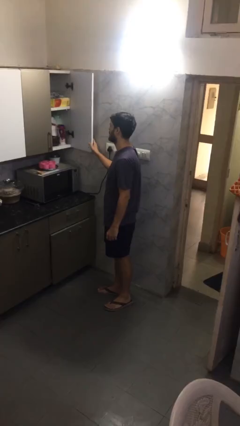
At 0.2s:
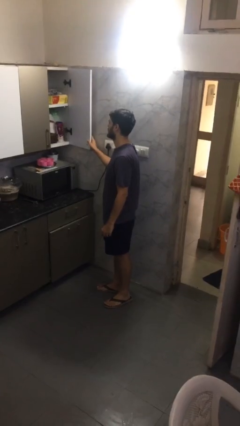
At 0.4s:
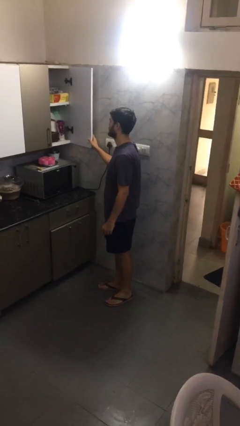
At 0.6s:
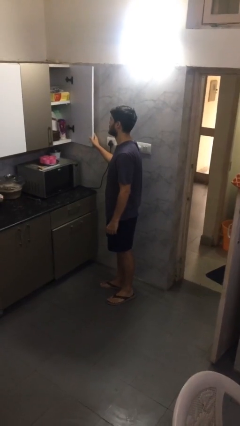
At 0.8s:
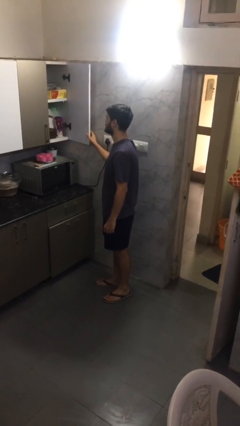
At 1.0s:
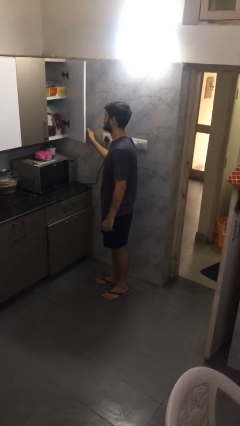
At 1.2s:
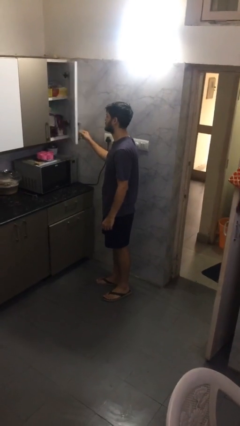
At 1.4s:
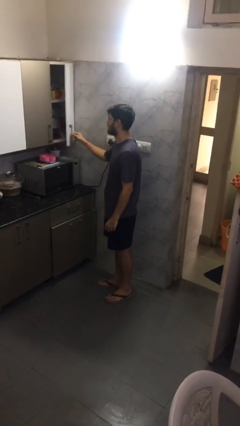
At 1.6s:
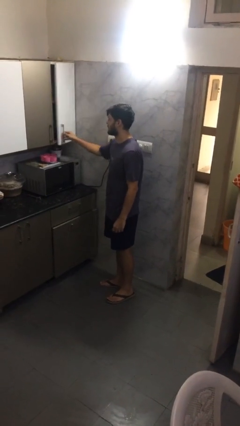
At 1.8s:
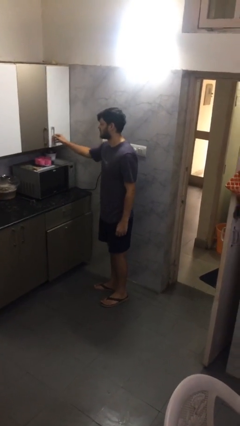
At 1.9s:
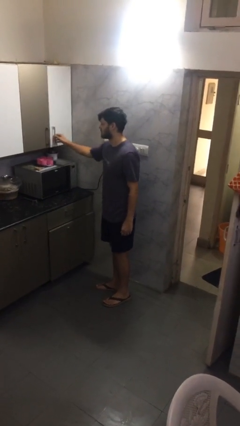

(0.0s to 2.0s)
person closes cabinet

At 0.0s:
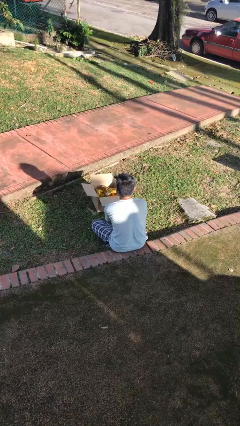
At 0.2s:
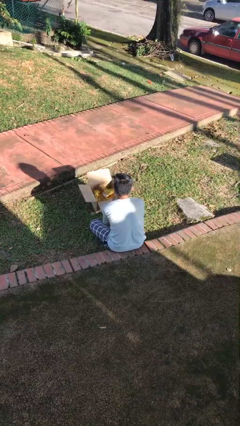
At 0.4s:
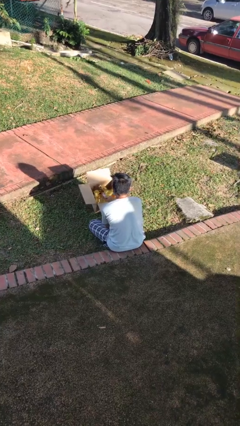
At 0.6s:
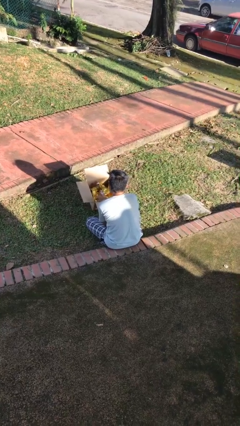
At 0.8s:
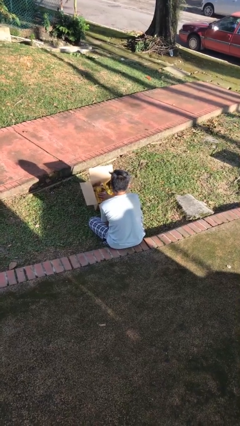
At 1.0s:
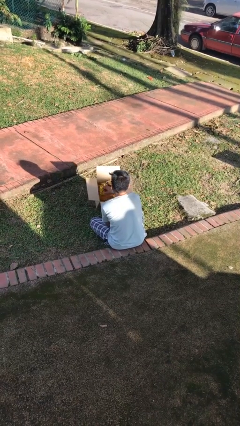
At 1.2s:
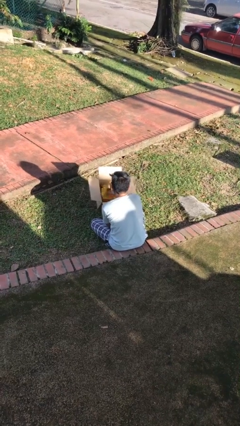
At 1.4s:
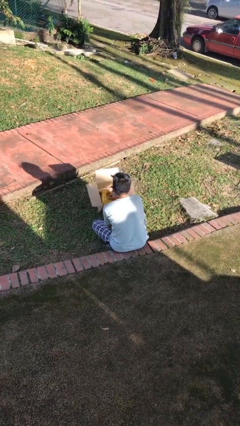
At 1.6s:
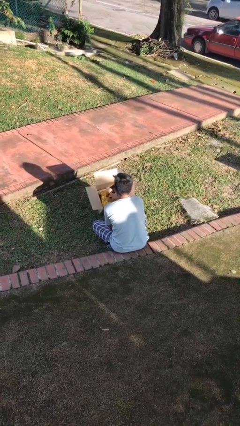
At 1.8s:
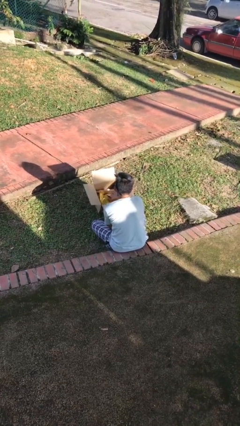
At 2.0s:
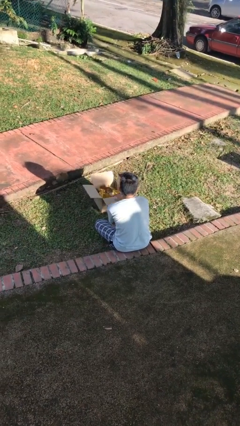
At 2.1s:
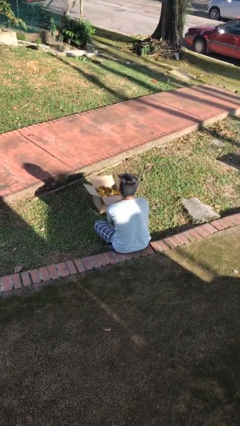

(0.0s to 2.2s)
person searches in box

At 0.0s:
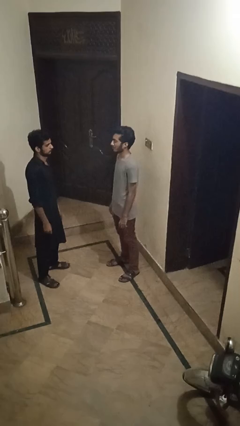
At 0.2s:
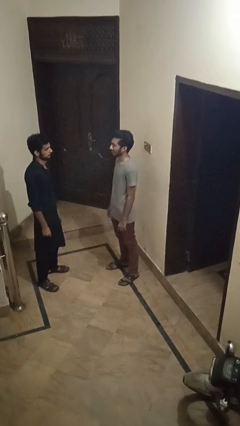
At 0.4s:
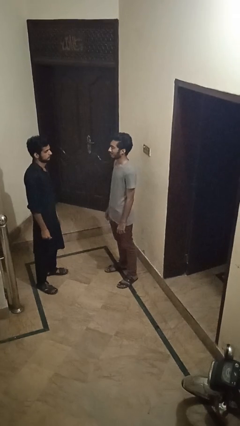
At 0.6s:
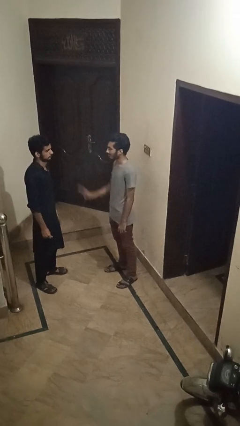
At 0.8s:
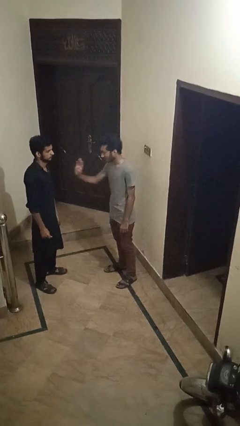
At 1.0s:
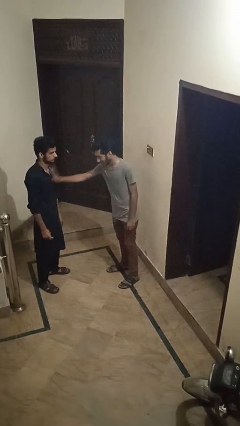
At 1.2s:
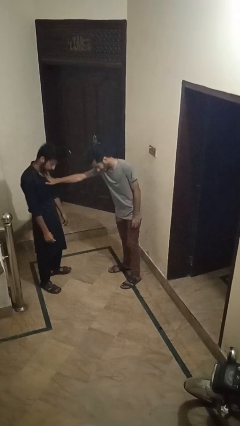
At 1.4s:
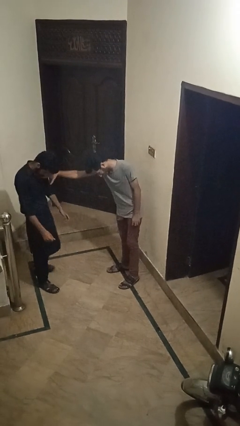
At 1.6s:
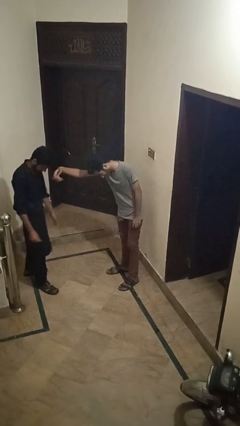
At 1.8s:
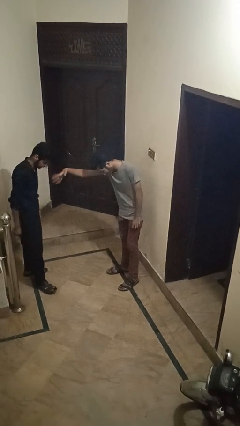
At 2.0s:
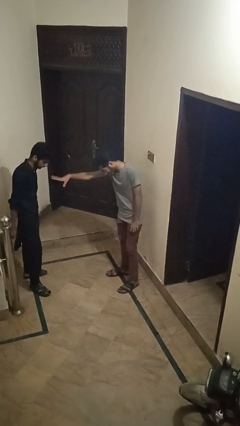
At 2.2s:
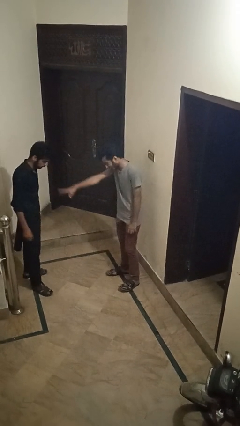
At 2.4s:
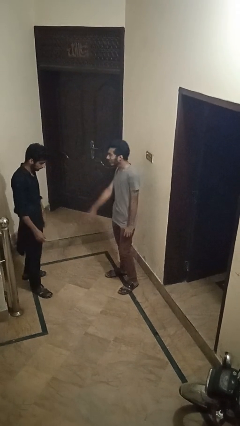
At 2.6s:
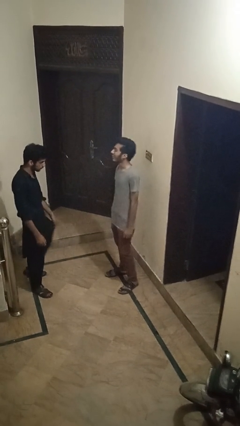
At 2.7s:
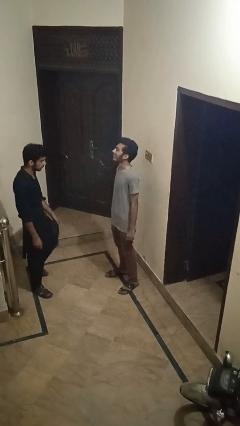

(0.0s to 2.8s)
person shoves person

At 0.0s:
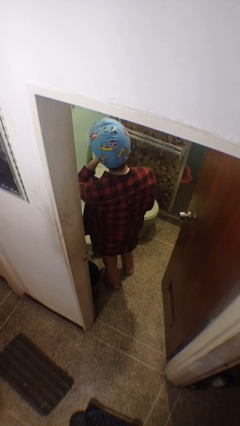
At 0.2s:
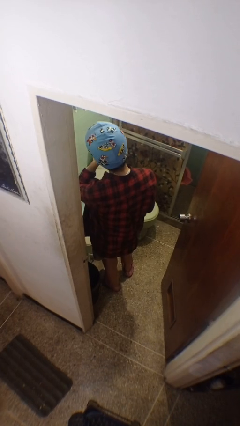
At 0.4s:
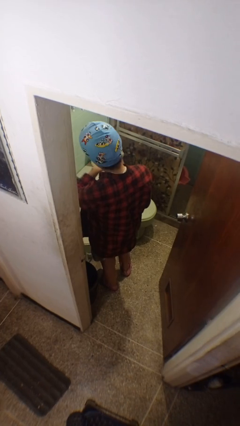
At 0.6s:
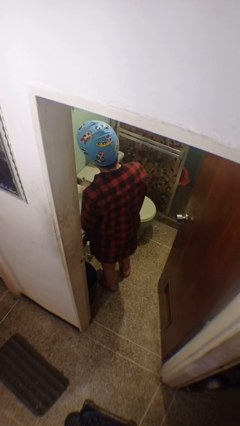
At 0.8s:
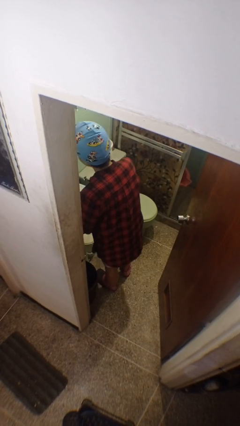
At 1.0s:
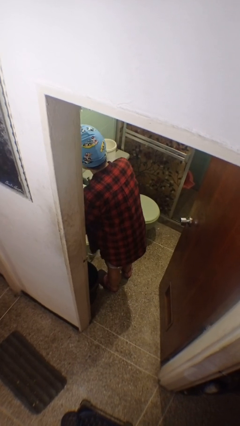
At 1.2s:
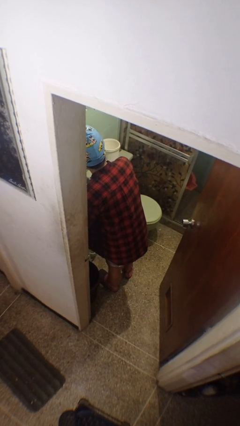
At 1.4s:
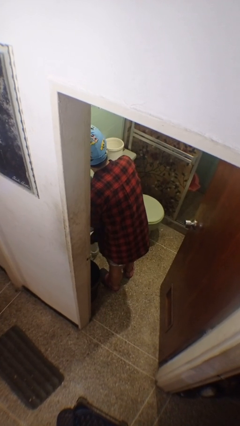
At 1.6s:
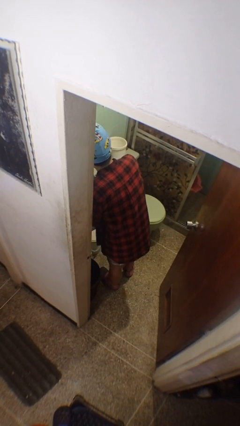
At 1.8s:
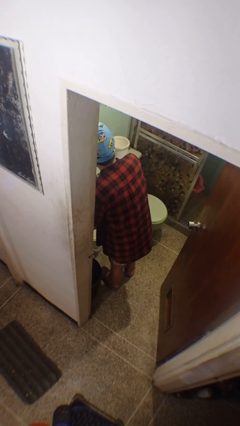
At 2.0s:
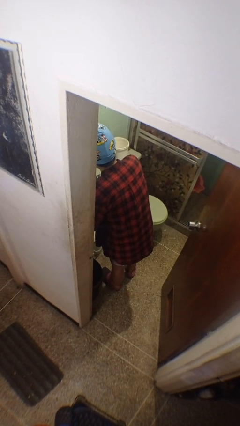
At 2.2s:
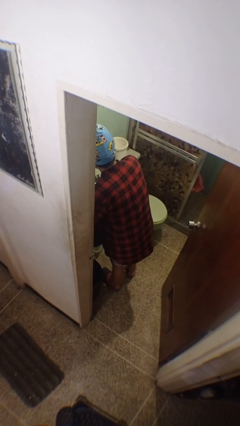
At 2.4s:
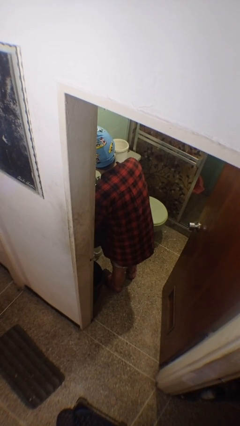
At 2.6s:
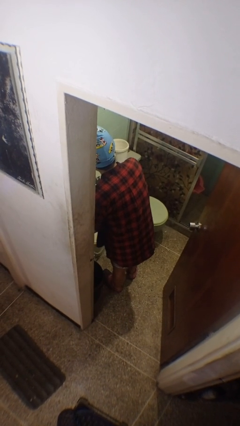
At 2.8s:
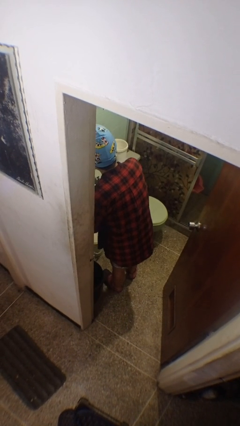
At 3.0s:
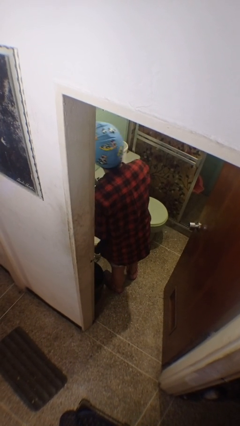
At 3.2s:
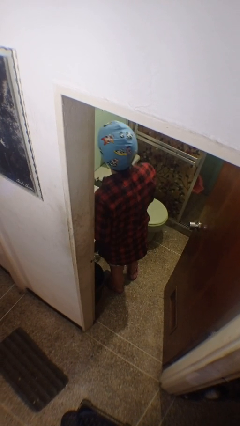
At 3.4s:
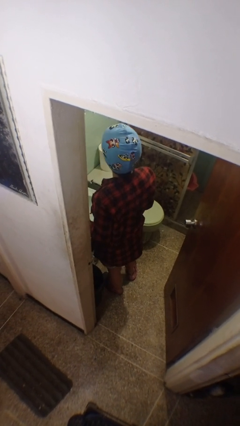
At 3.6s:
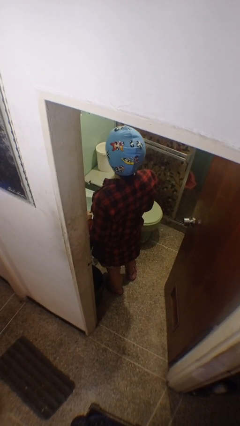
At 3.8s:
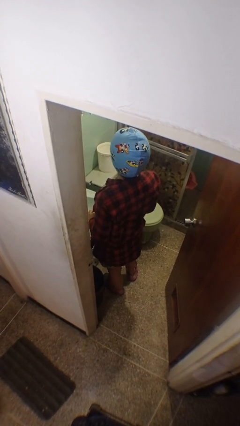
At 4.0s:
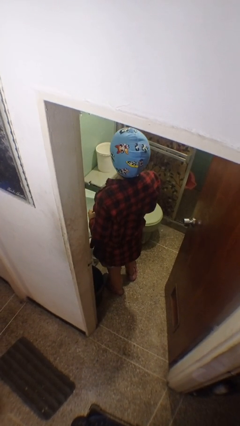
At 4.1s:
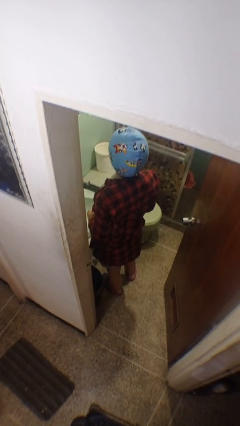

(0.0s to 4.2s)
person washes hands

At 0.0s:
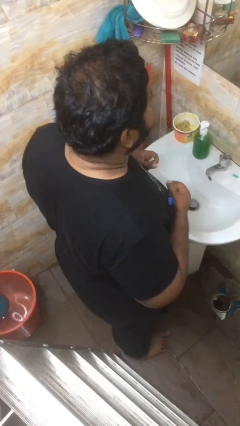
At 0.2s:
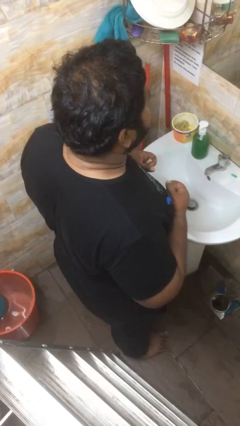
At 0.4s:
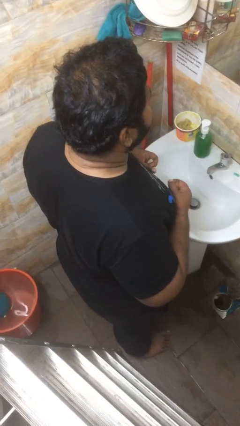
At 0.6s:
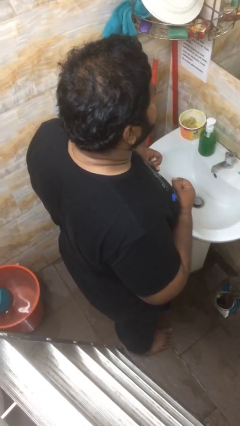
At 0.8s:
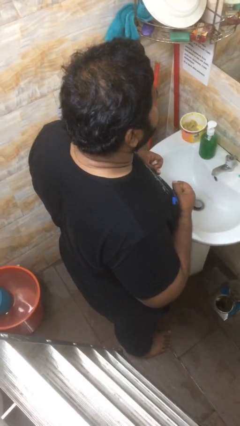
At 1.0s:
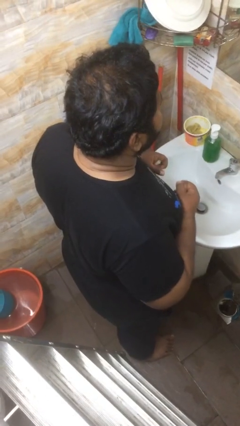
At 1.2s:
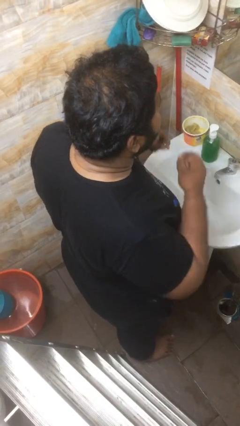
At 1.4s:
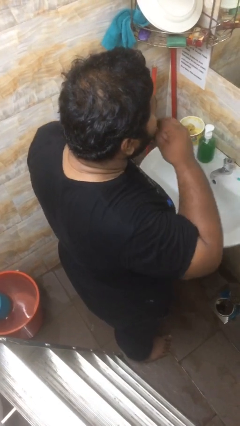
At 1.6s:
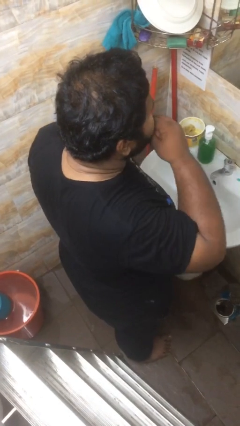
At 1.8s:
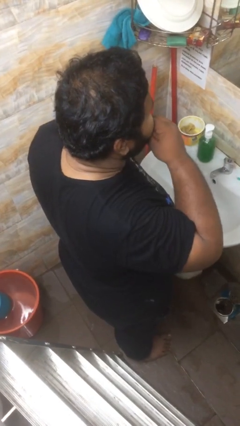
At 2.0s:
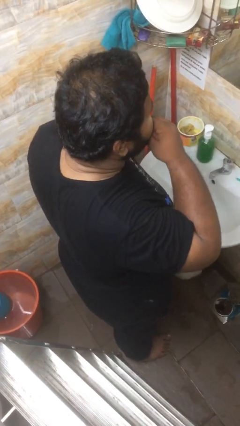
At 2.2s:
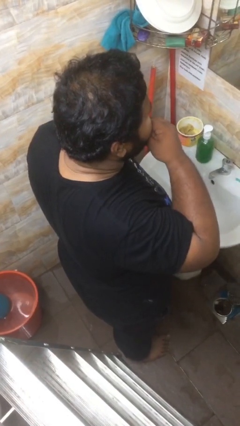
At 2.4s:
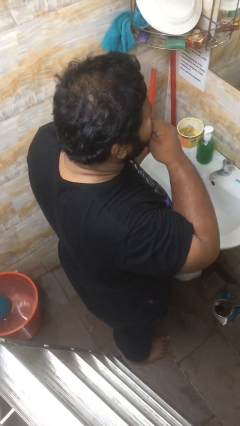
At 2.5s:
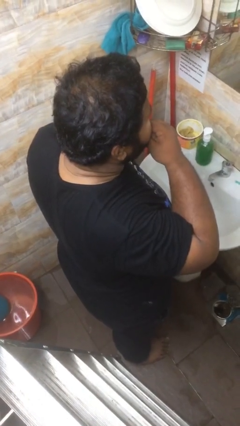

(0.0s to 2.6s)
person flosses

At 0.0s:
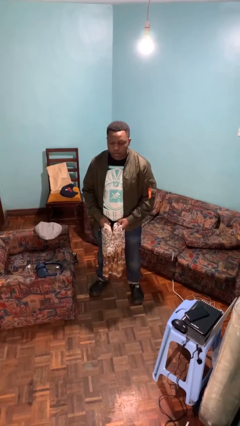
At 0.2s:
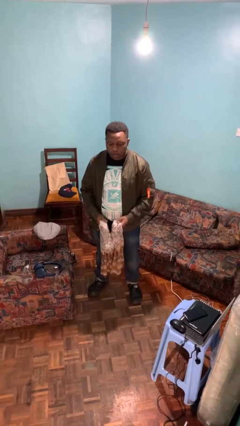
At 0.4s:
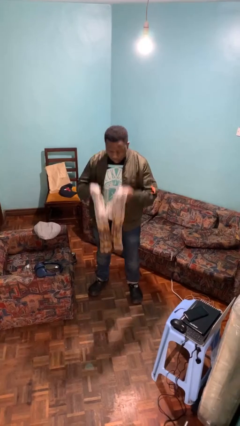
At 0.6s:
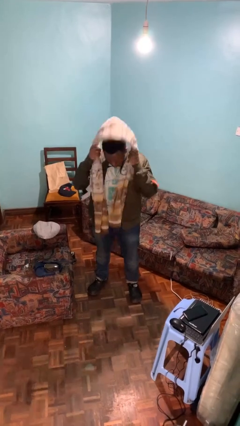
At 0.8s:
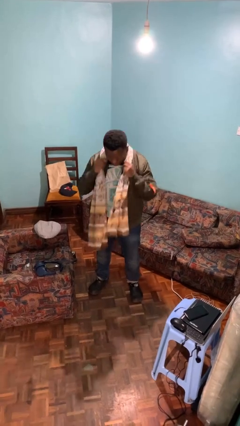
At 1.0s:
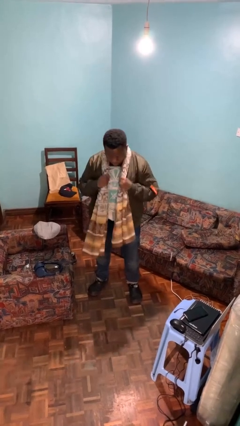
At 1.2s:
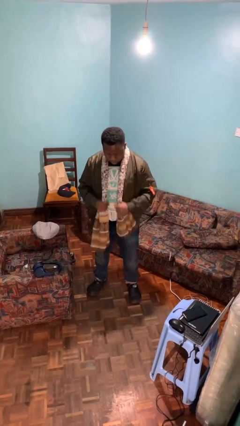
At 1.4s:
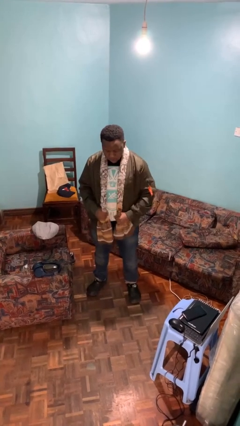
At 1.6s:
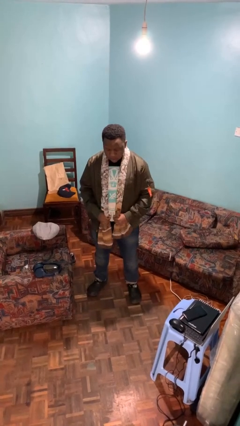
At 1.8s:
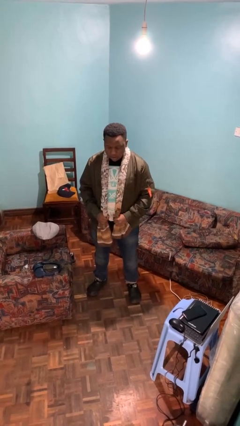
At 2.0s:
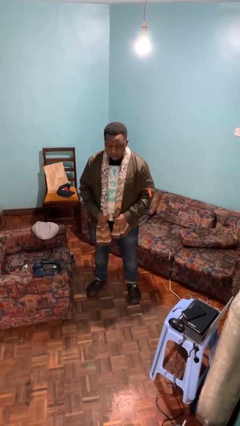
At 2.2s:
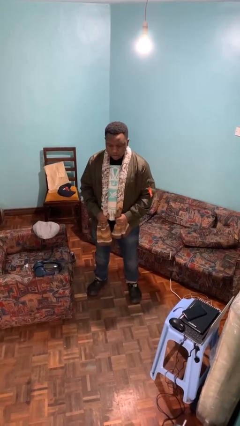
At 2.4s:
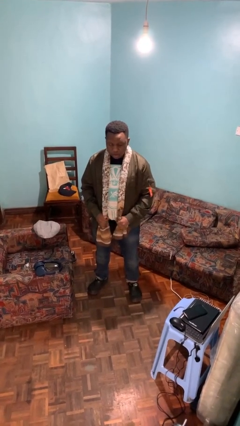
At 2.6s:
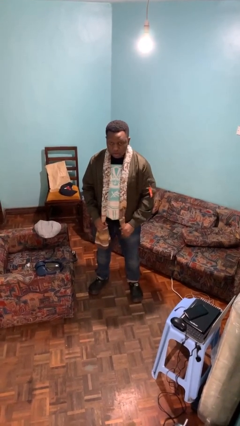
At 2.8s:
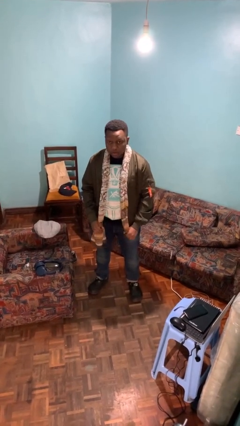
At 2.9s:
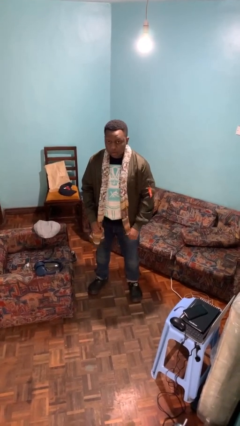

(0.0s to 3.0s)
person puts on scarf

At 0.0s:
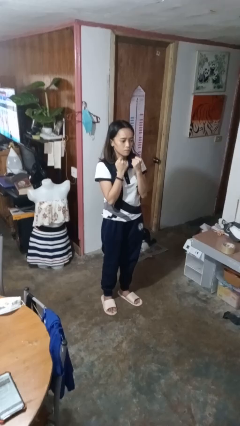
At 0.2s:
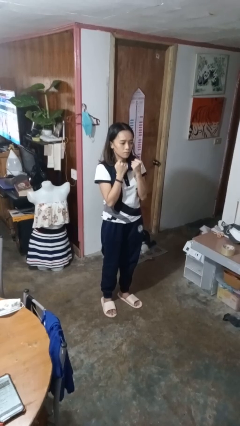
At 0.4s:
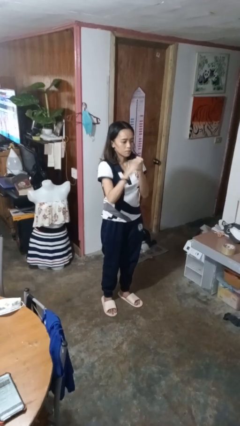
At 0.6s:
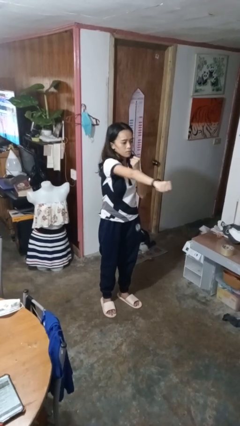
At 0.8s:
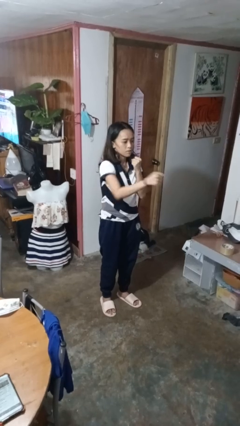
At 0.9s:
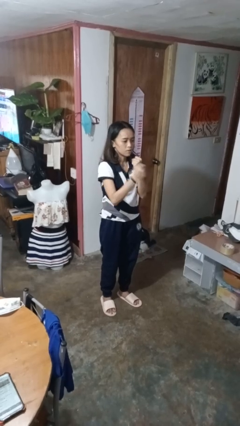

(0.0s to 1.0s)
person punches
